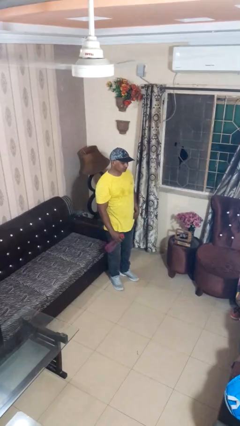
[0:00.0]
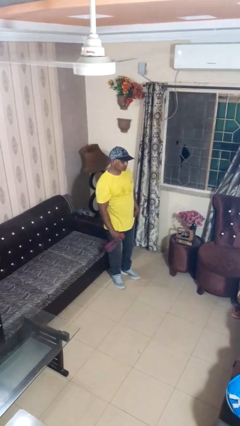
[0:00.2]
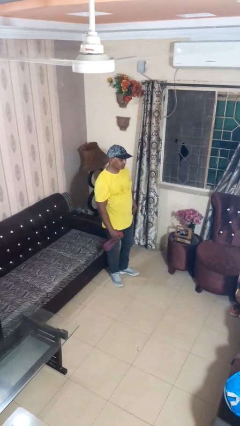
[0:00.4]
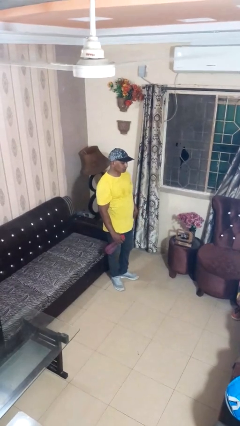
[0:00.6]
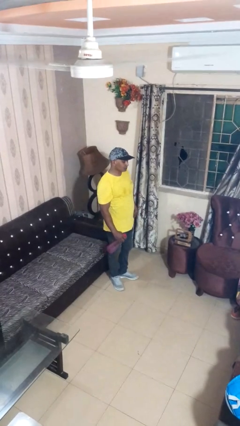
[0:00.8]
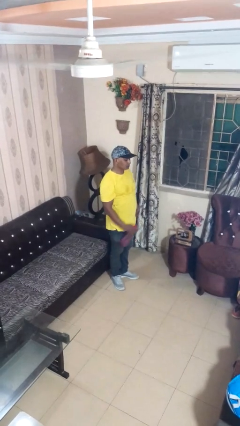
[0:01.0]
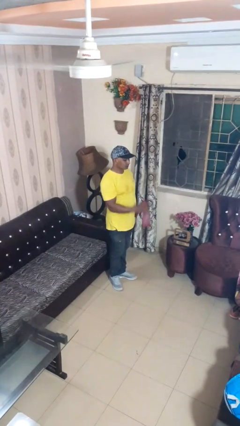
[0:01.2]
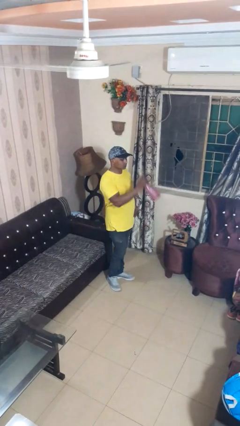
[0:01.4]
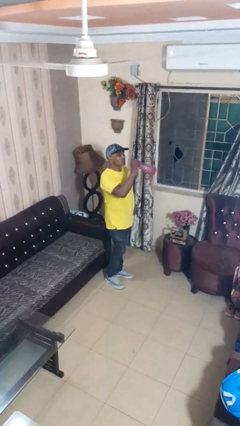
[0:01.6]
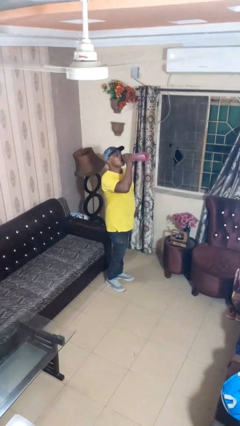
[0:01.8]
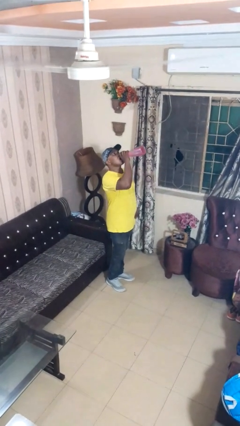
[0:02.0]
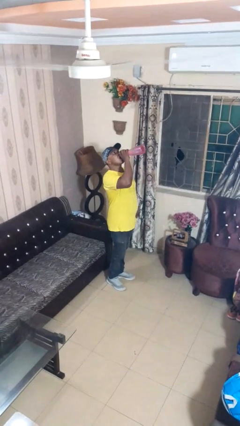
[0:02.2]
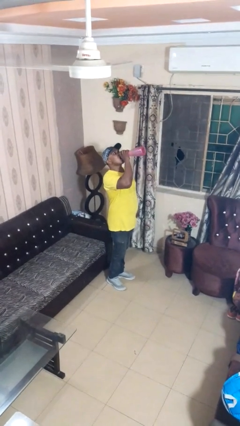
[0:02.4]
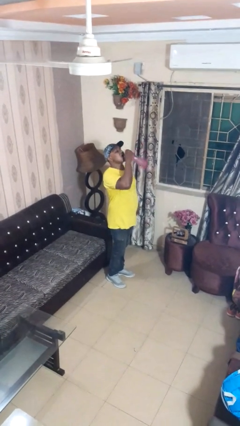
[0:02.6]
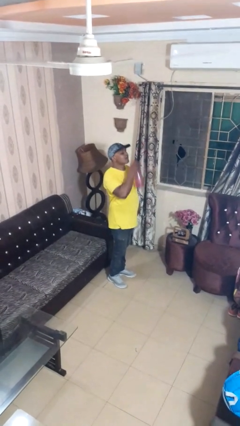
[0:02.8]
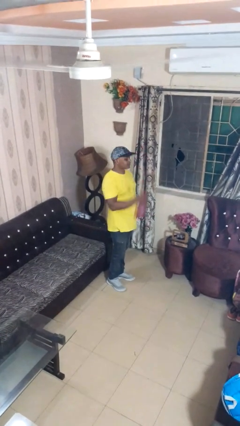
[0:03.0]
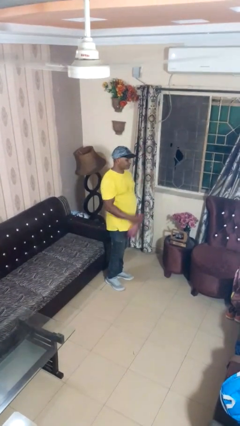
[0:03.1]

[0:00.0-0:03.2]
person drinks from bottle

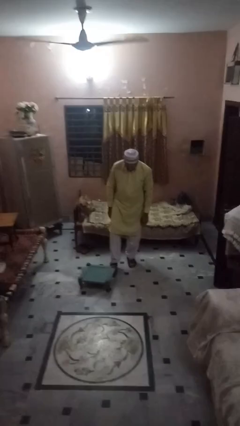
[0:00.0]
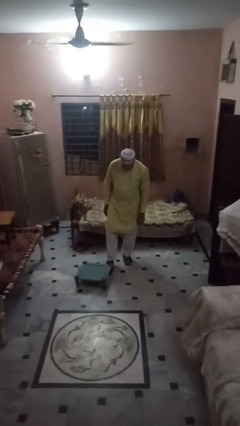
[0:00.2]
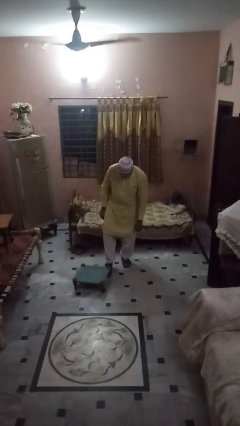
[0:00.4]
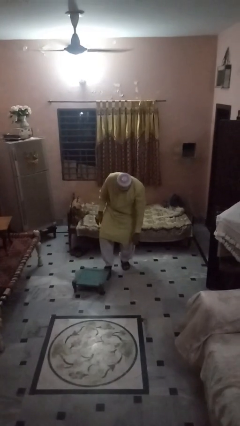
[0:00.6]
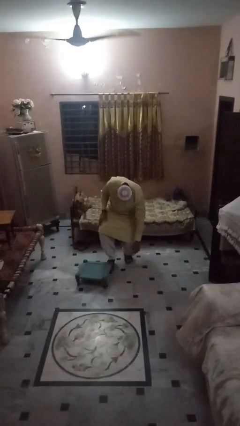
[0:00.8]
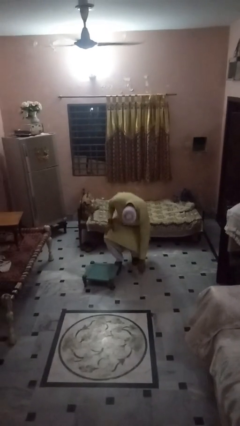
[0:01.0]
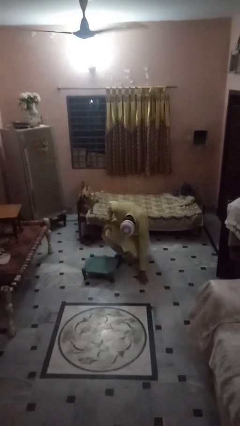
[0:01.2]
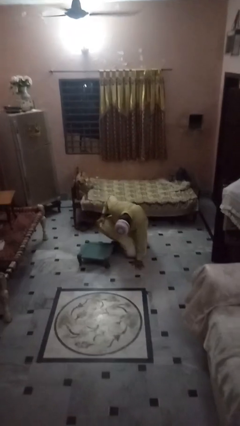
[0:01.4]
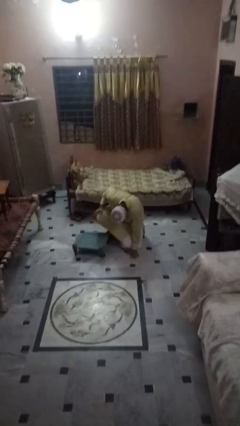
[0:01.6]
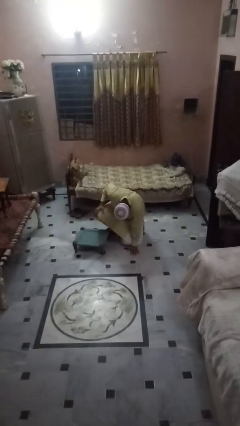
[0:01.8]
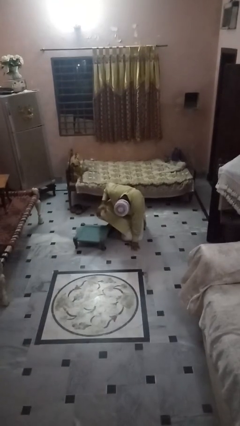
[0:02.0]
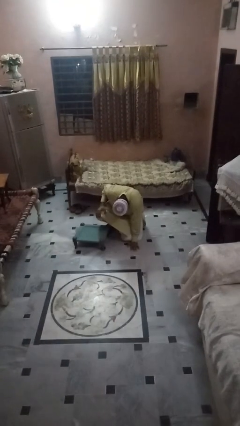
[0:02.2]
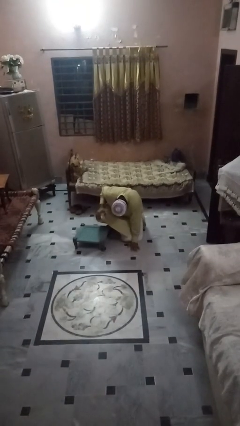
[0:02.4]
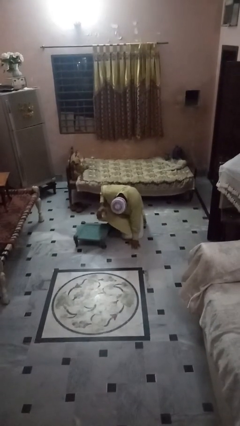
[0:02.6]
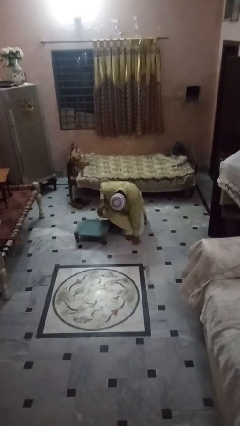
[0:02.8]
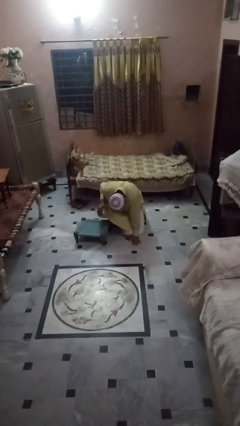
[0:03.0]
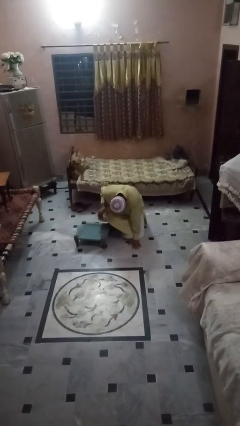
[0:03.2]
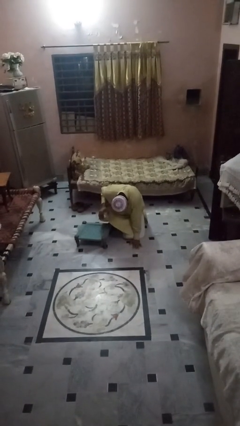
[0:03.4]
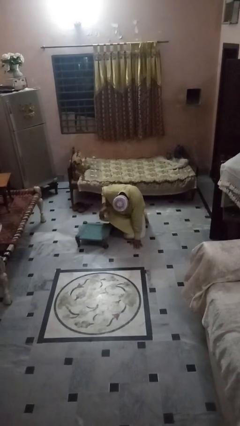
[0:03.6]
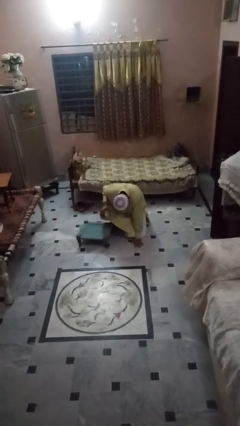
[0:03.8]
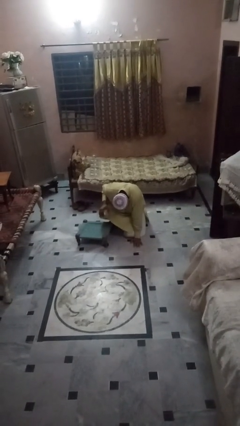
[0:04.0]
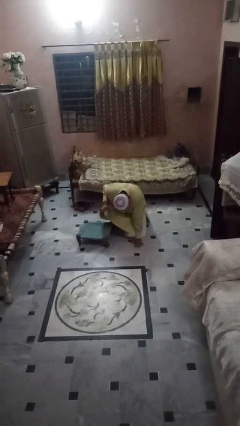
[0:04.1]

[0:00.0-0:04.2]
person lies down on floor

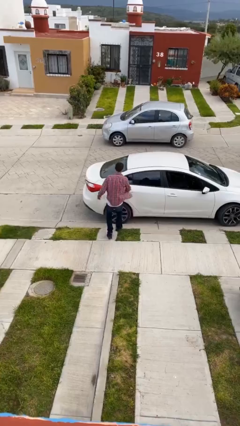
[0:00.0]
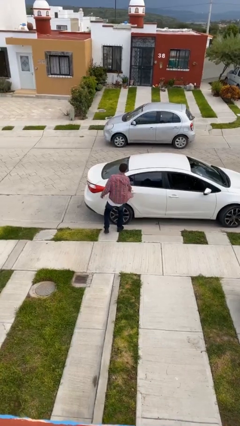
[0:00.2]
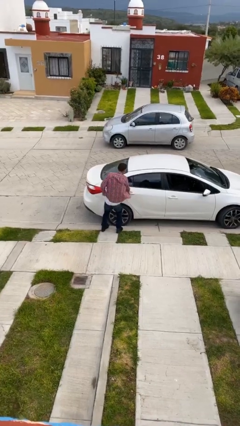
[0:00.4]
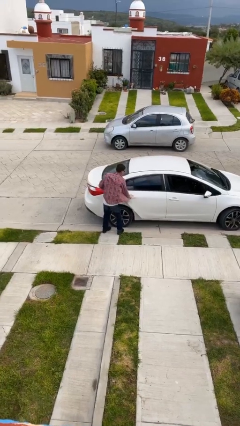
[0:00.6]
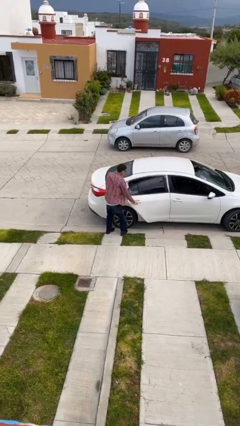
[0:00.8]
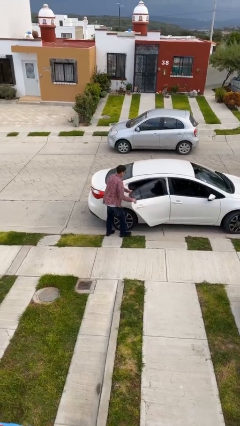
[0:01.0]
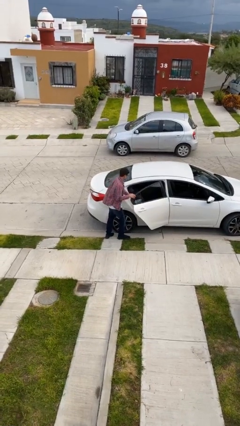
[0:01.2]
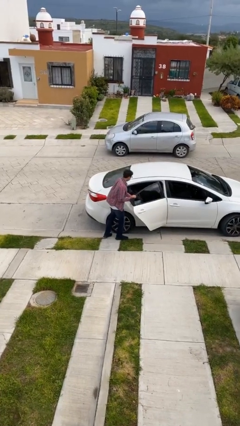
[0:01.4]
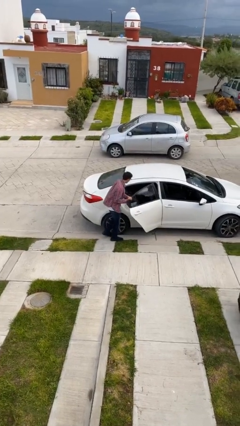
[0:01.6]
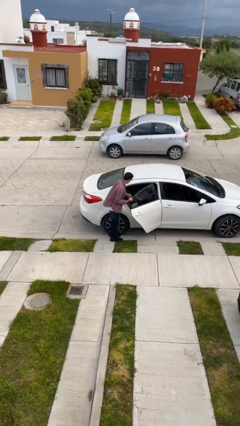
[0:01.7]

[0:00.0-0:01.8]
person opens car door

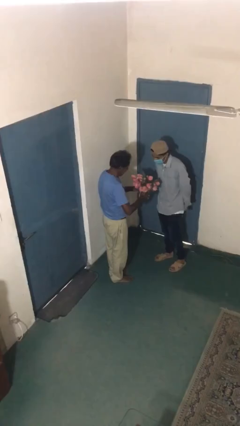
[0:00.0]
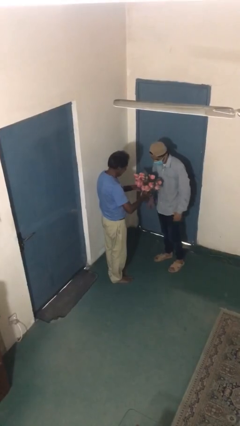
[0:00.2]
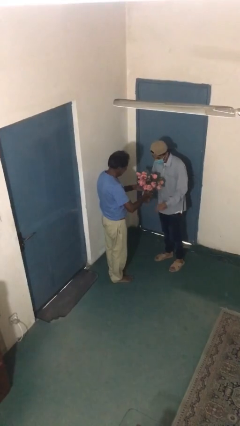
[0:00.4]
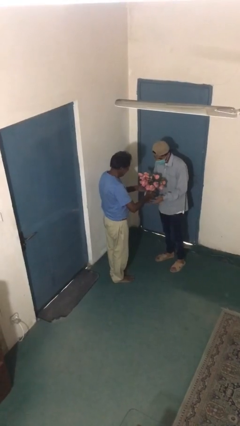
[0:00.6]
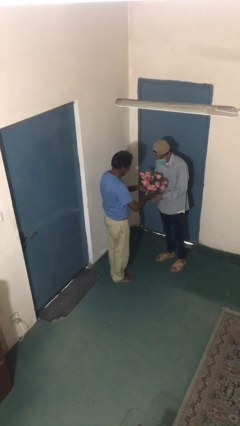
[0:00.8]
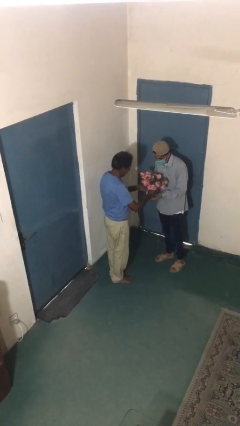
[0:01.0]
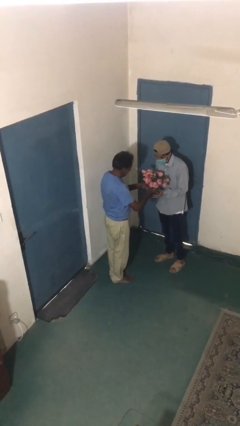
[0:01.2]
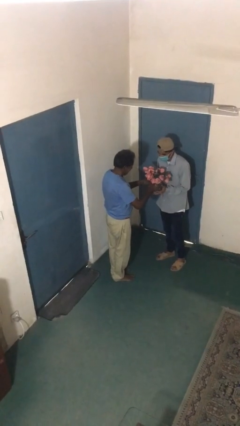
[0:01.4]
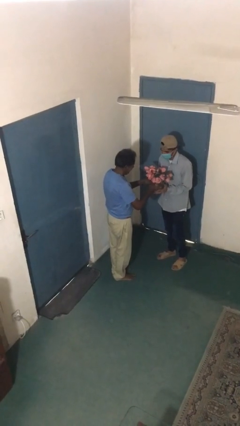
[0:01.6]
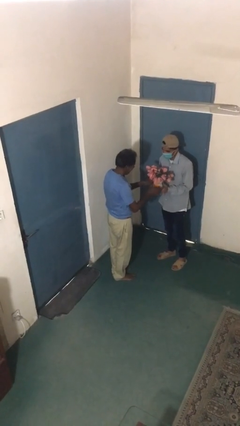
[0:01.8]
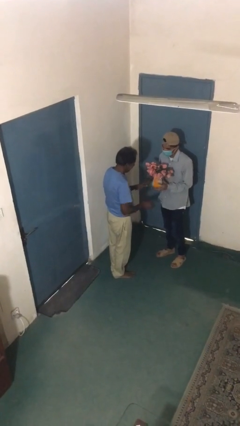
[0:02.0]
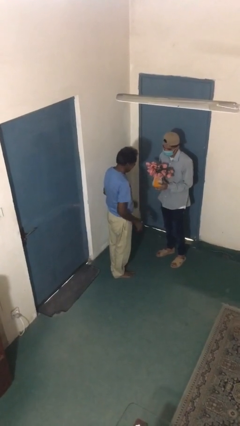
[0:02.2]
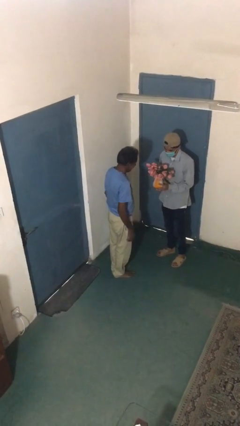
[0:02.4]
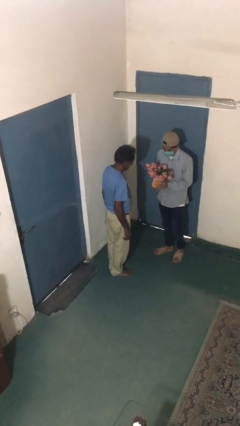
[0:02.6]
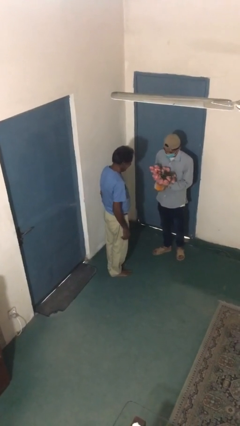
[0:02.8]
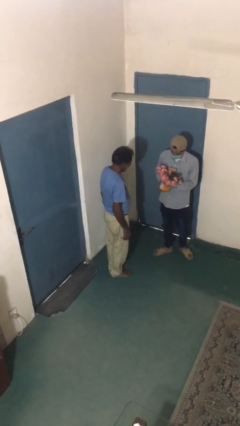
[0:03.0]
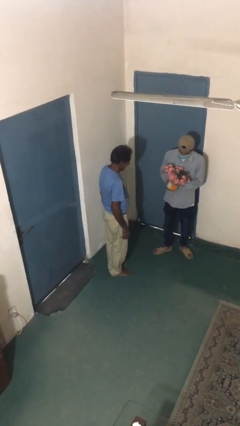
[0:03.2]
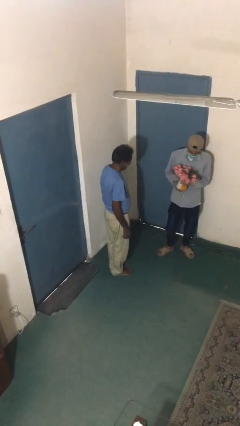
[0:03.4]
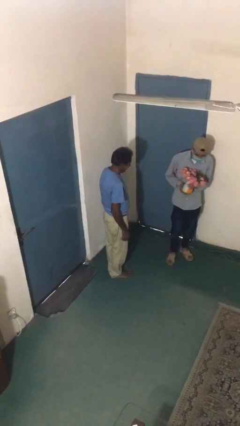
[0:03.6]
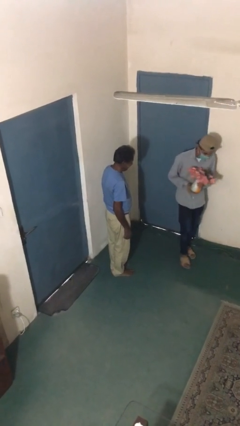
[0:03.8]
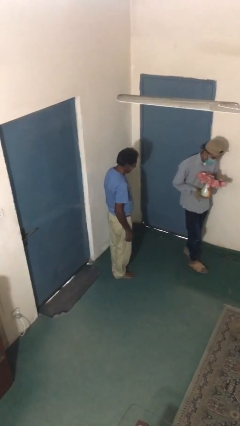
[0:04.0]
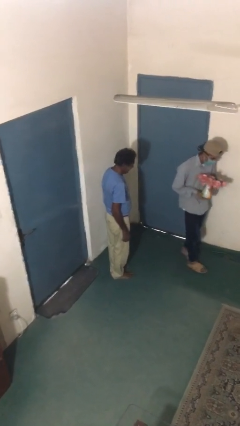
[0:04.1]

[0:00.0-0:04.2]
person transfers object to person

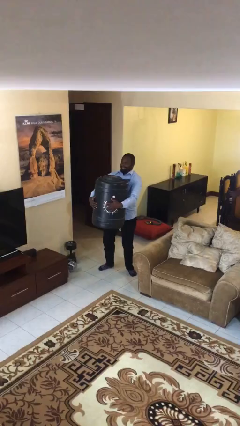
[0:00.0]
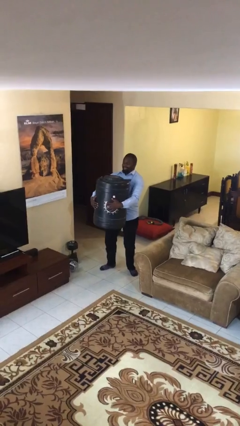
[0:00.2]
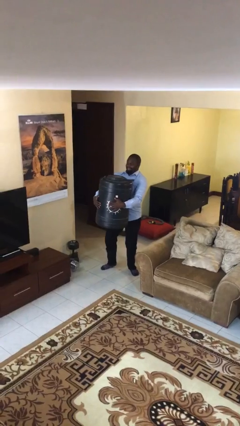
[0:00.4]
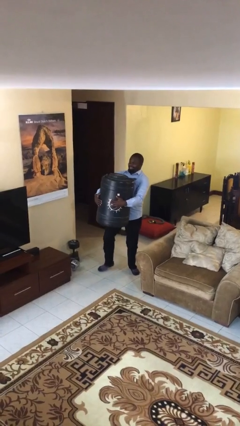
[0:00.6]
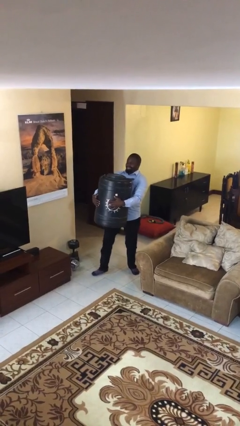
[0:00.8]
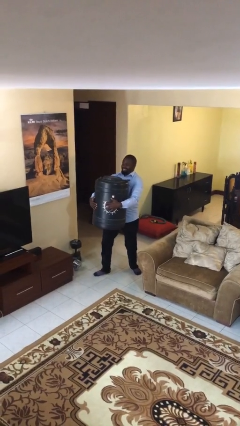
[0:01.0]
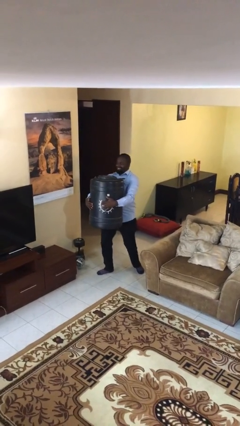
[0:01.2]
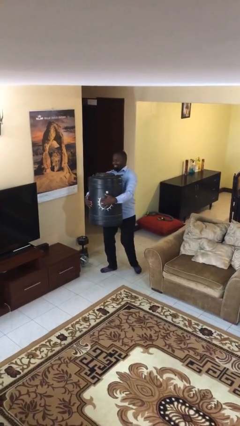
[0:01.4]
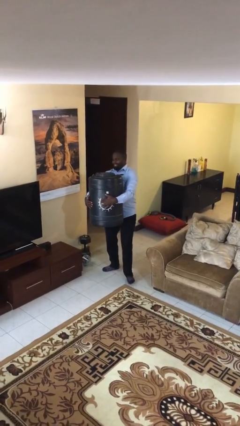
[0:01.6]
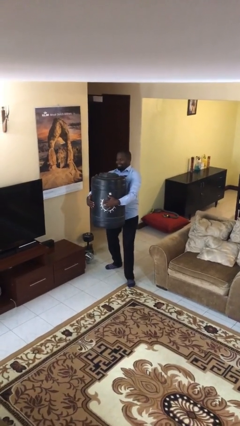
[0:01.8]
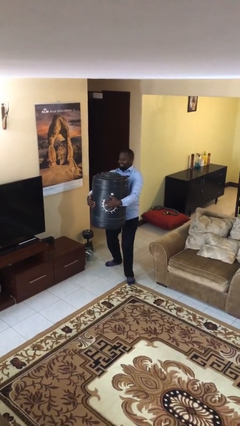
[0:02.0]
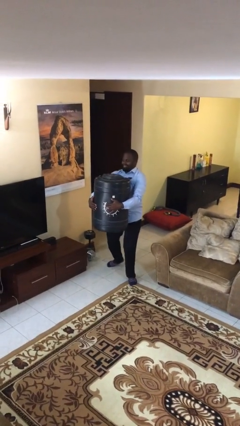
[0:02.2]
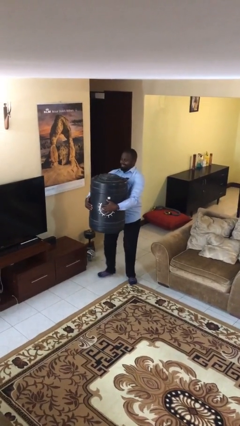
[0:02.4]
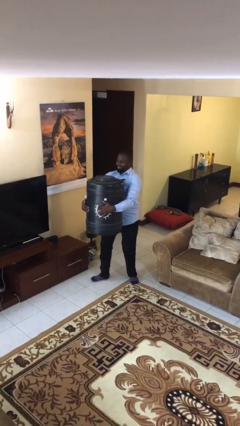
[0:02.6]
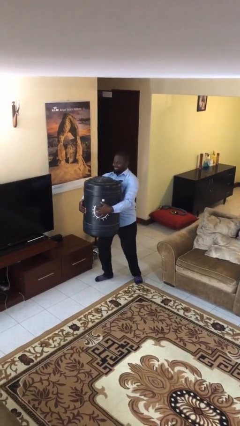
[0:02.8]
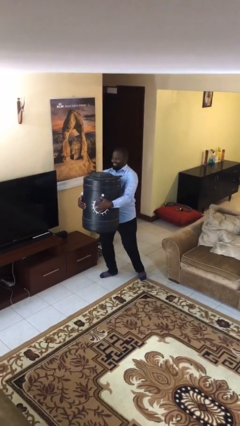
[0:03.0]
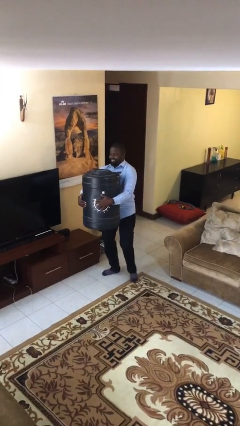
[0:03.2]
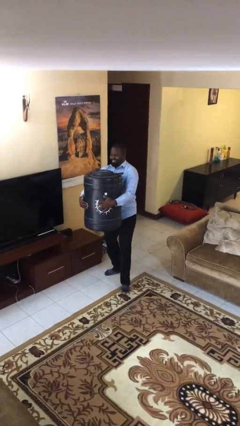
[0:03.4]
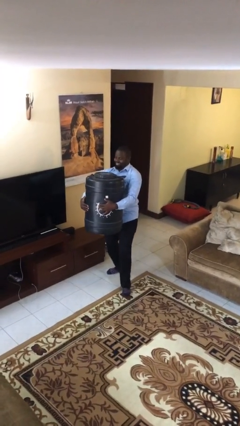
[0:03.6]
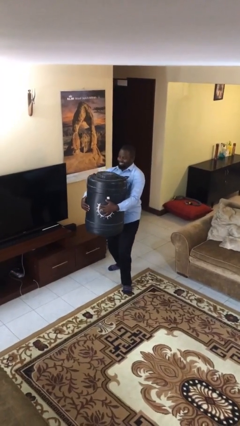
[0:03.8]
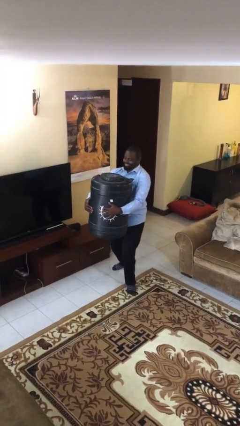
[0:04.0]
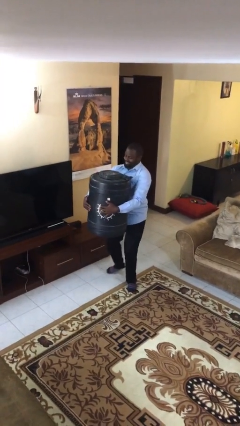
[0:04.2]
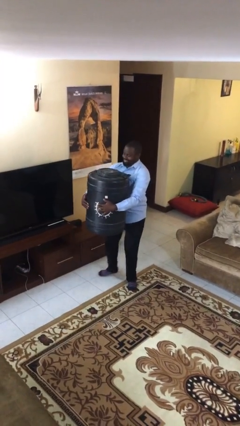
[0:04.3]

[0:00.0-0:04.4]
person carries heavy object
